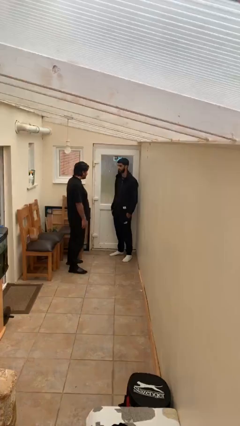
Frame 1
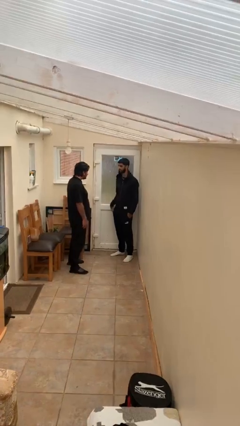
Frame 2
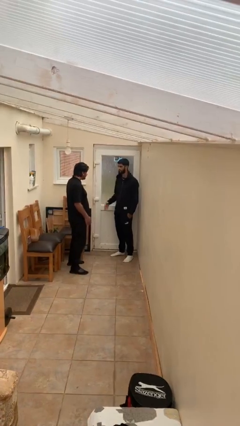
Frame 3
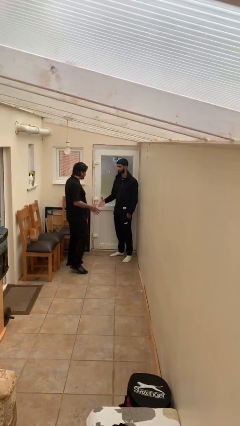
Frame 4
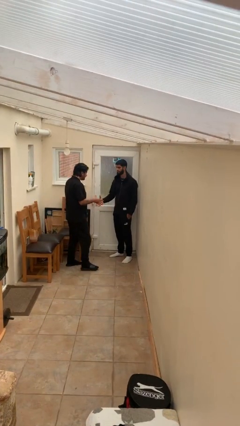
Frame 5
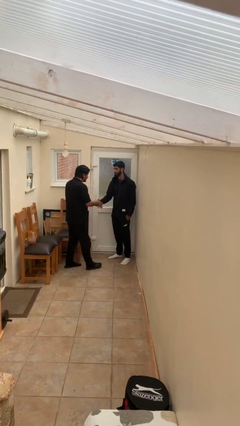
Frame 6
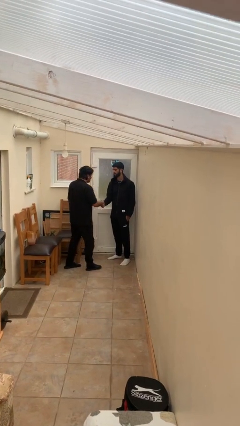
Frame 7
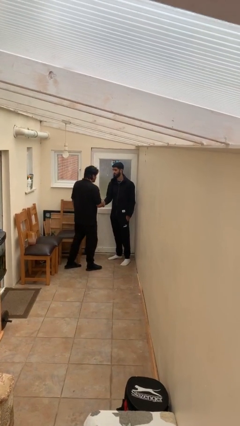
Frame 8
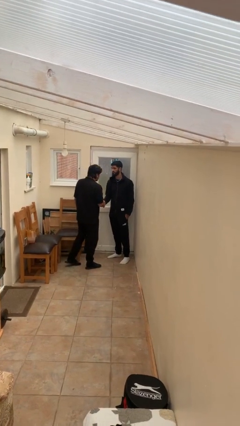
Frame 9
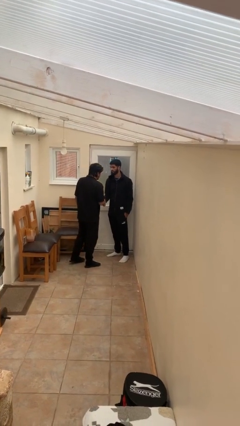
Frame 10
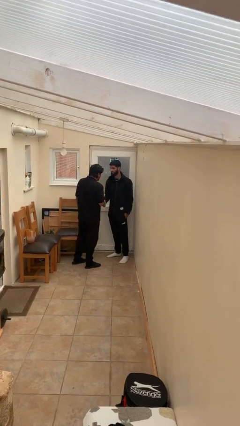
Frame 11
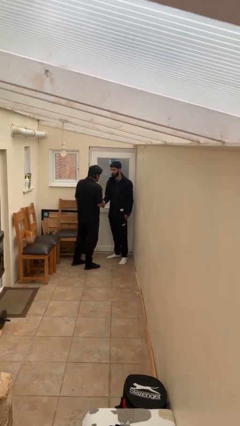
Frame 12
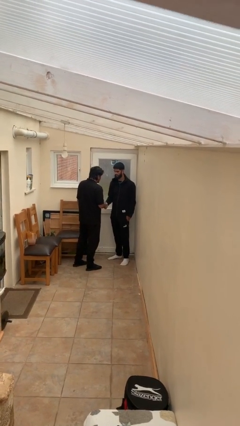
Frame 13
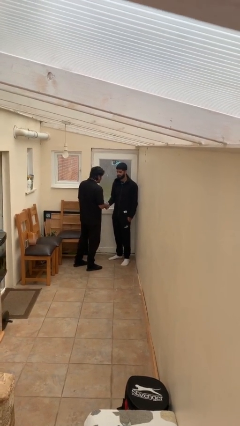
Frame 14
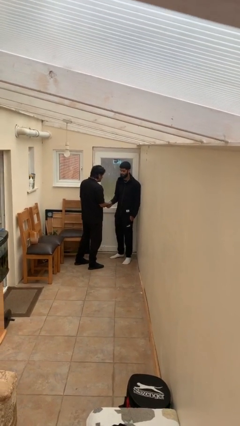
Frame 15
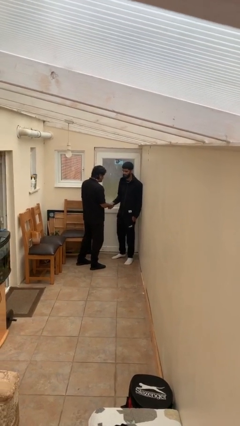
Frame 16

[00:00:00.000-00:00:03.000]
person shakes hand

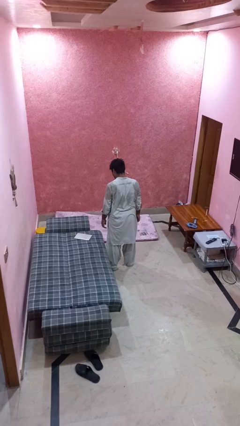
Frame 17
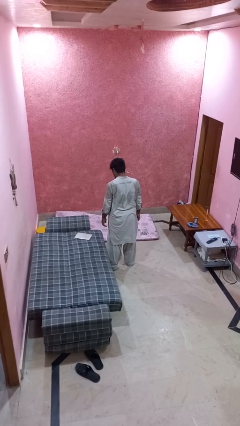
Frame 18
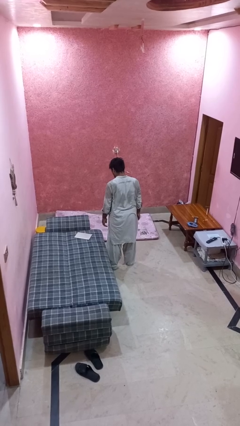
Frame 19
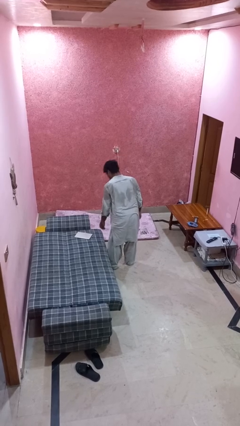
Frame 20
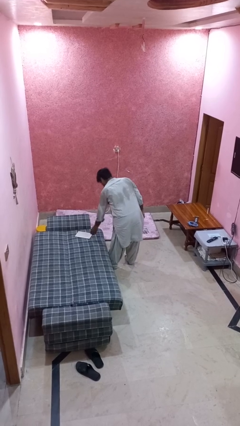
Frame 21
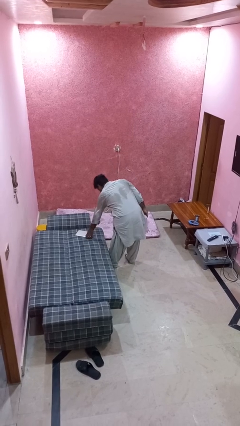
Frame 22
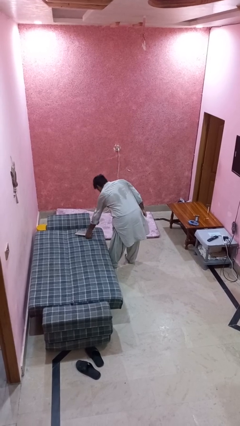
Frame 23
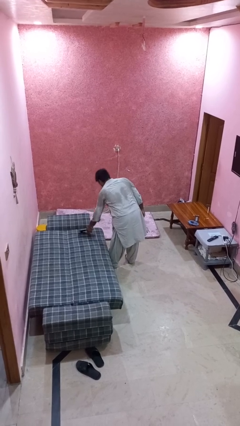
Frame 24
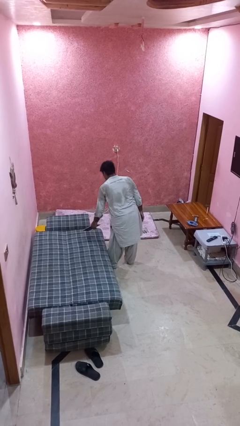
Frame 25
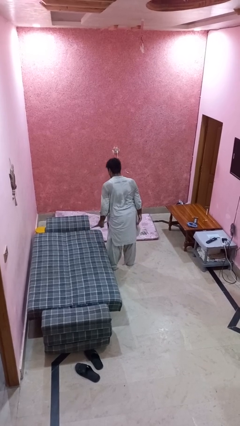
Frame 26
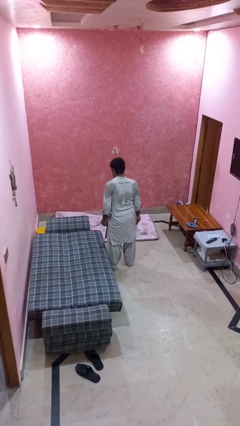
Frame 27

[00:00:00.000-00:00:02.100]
person picks up object from bed

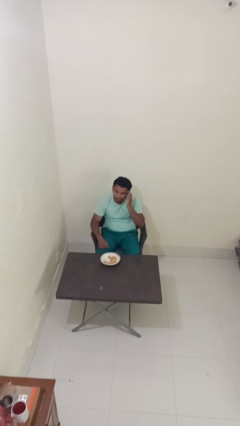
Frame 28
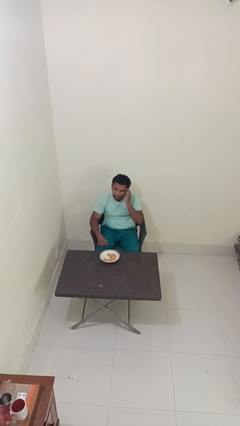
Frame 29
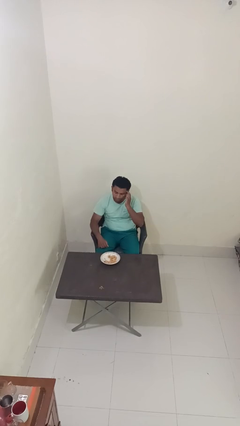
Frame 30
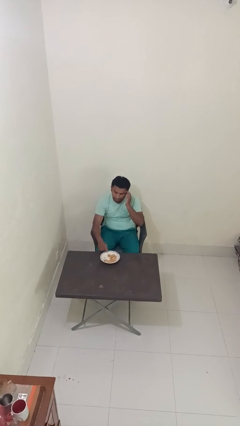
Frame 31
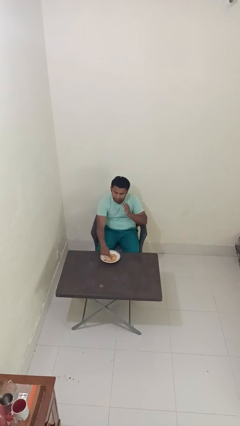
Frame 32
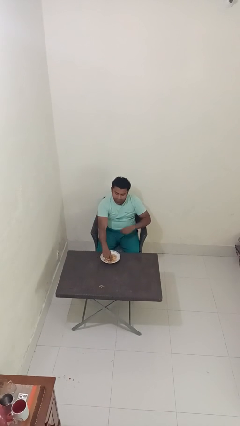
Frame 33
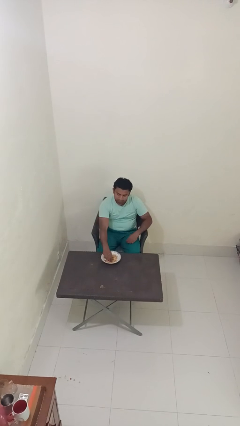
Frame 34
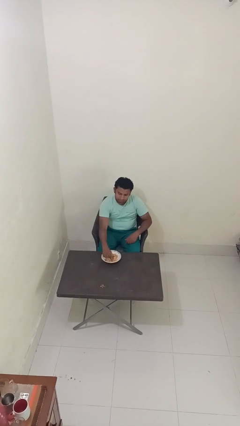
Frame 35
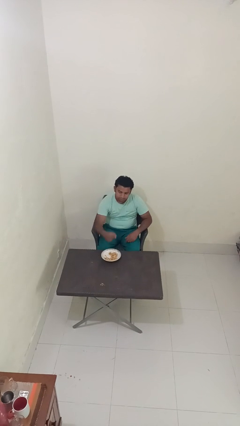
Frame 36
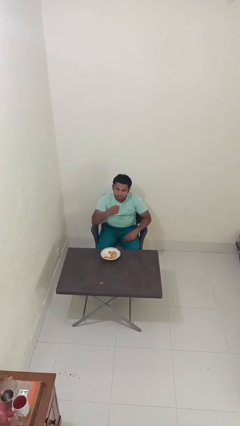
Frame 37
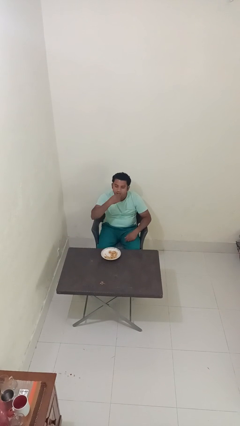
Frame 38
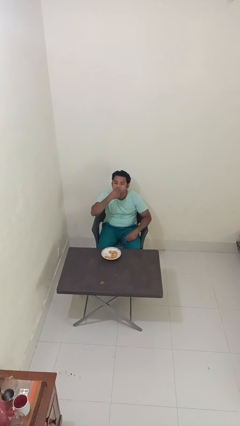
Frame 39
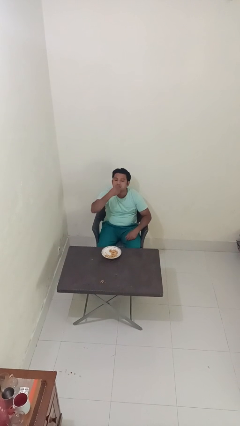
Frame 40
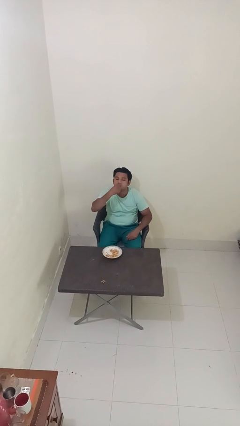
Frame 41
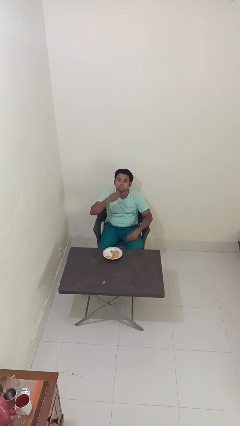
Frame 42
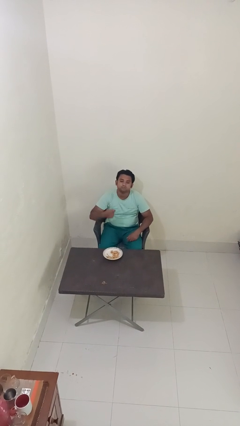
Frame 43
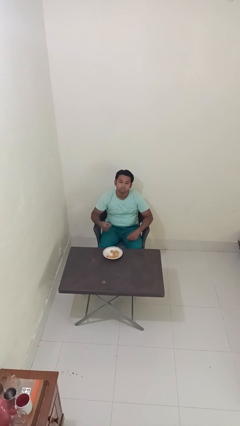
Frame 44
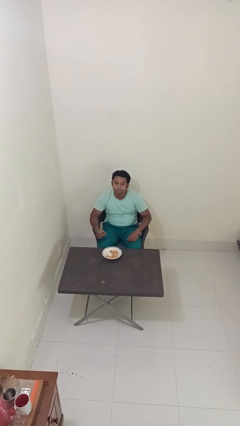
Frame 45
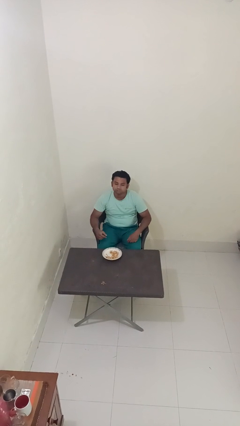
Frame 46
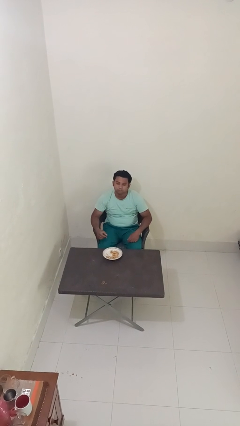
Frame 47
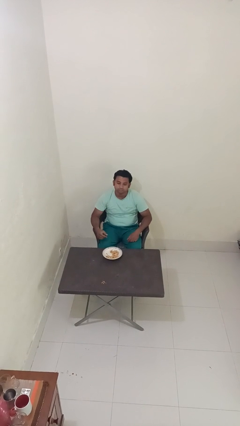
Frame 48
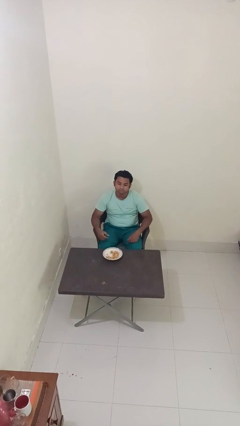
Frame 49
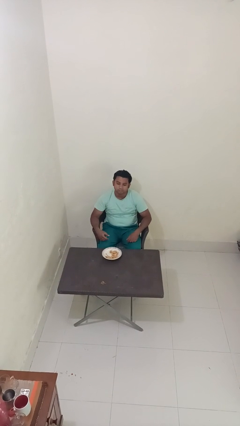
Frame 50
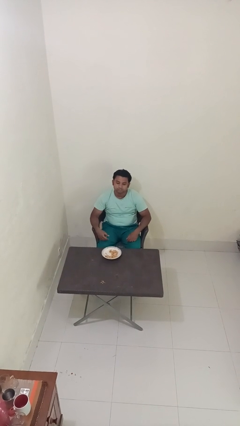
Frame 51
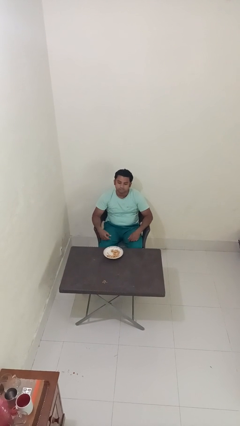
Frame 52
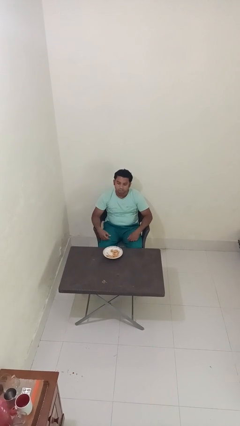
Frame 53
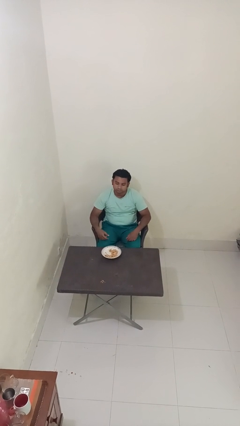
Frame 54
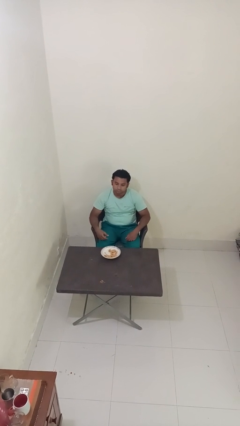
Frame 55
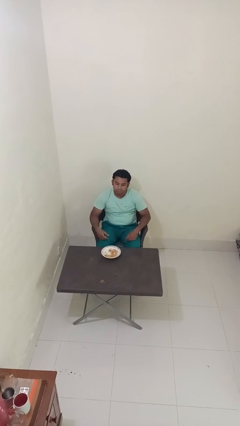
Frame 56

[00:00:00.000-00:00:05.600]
person eats with hands

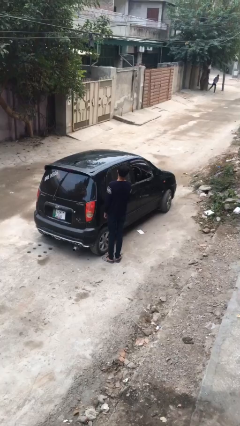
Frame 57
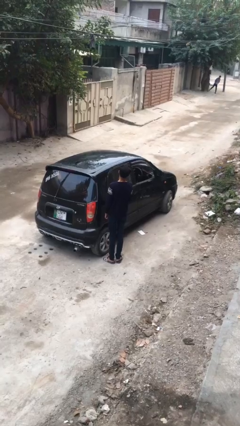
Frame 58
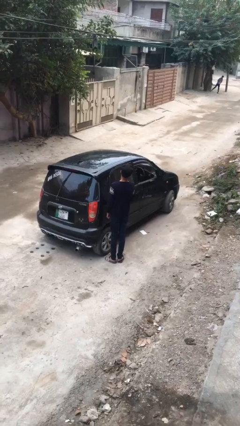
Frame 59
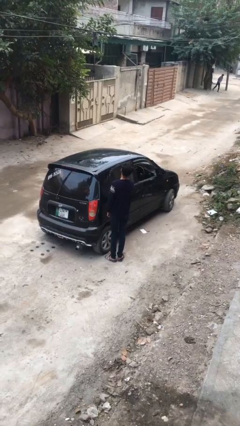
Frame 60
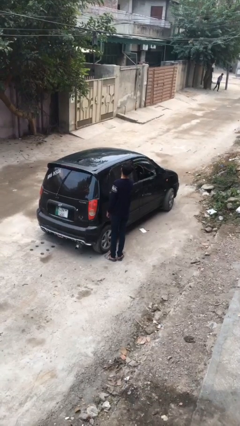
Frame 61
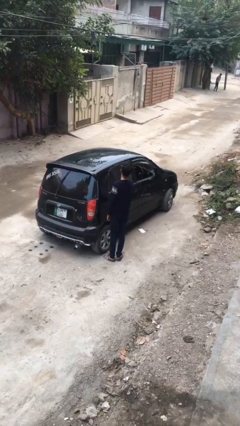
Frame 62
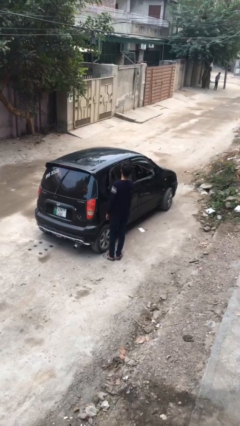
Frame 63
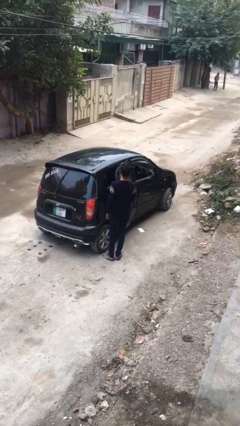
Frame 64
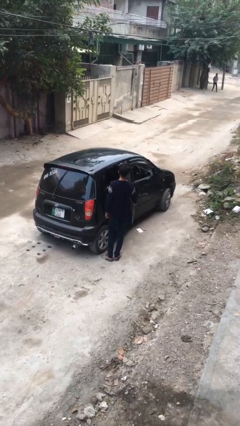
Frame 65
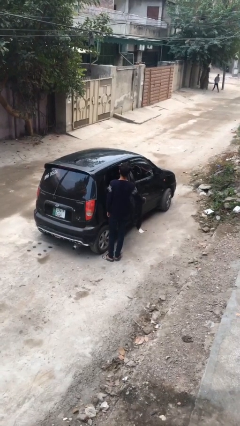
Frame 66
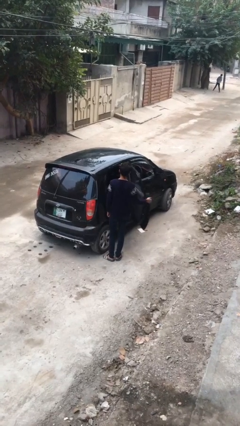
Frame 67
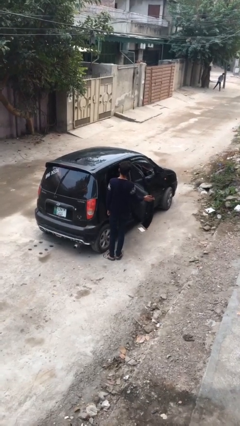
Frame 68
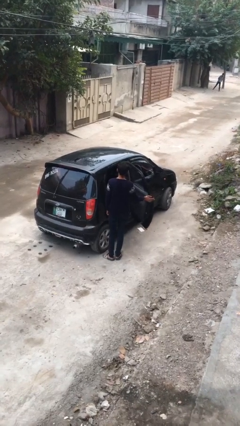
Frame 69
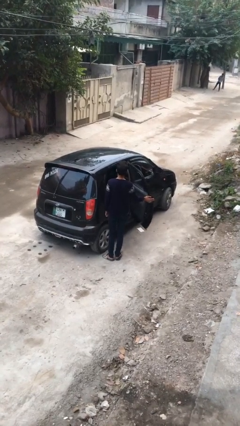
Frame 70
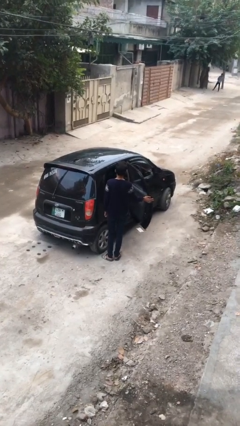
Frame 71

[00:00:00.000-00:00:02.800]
person opens car door

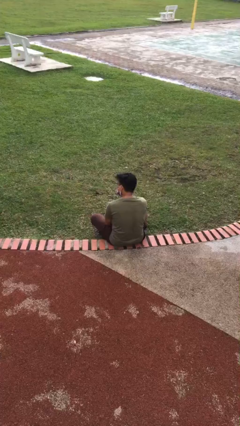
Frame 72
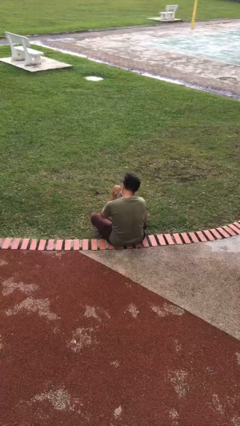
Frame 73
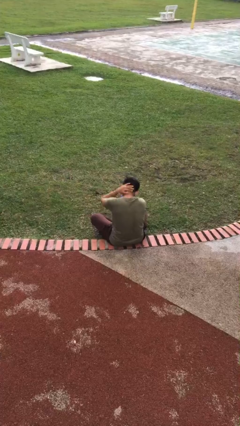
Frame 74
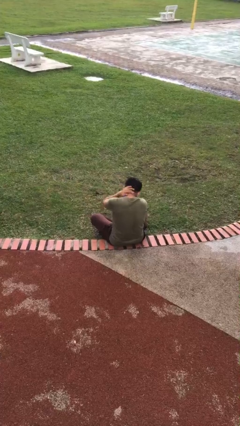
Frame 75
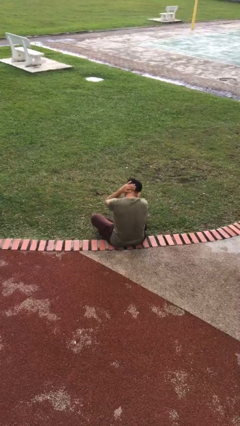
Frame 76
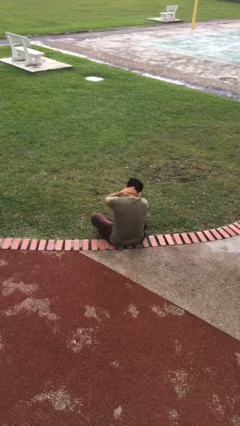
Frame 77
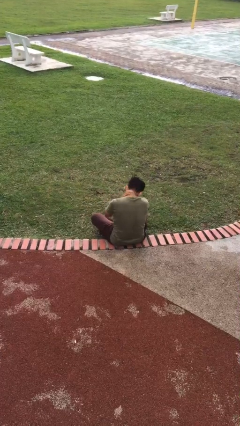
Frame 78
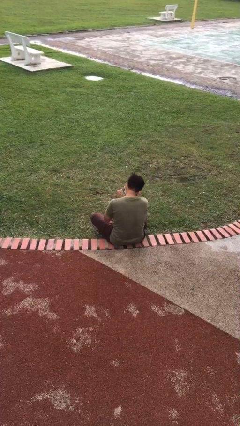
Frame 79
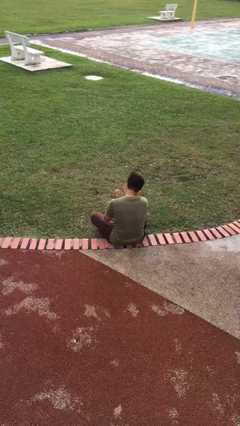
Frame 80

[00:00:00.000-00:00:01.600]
person rubs neck

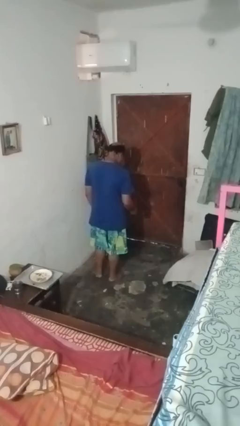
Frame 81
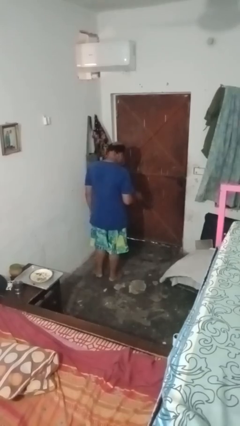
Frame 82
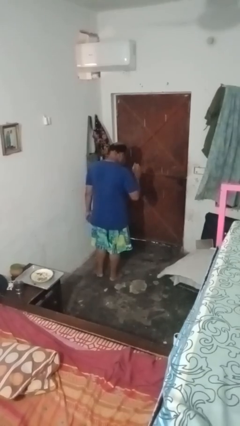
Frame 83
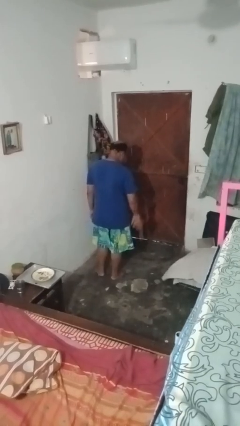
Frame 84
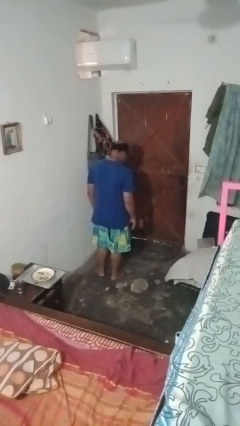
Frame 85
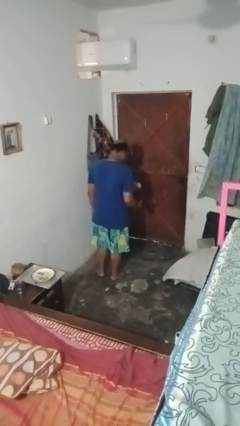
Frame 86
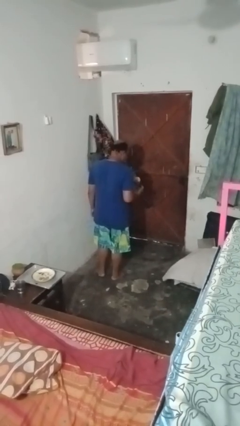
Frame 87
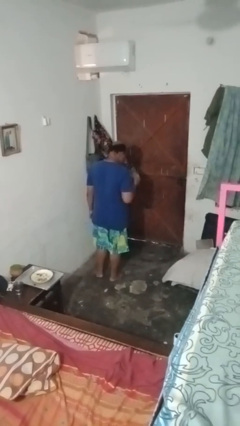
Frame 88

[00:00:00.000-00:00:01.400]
person bounces ball on floor

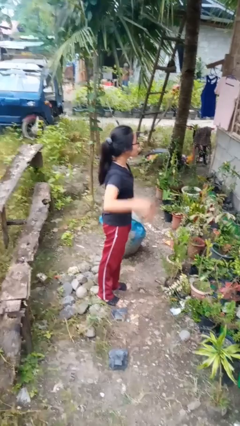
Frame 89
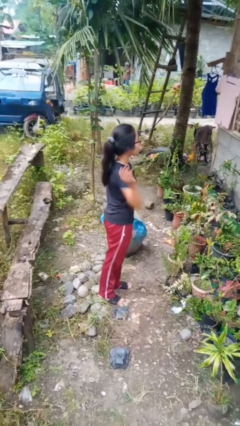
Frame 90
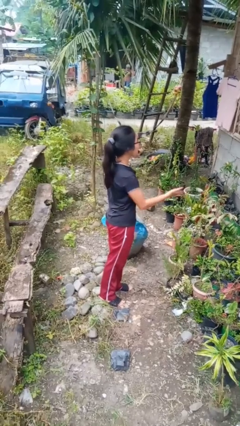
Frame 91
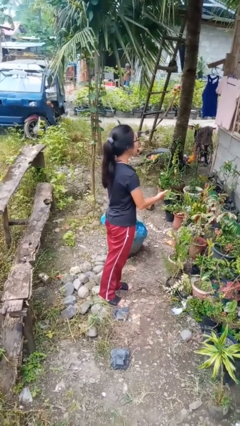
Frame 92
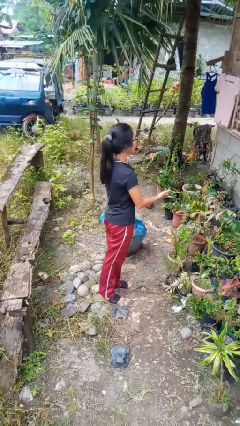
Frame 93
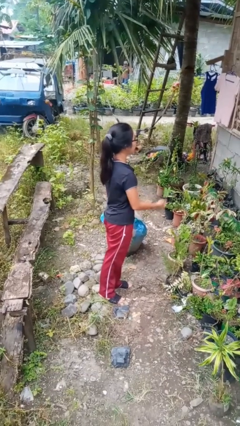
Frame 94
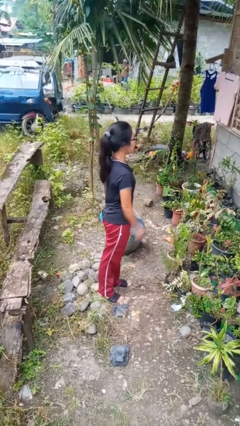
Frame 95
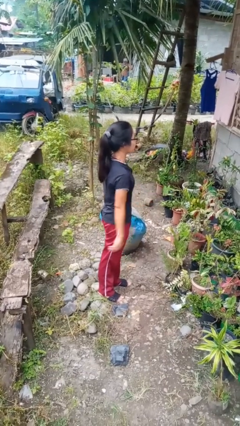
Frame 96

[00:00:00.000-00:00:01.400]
person karate chop
